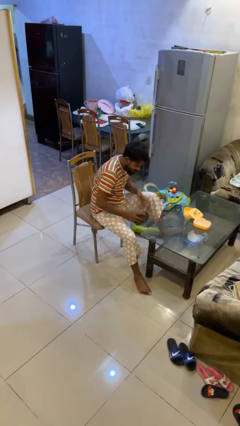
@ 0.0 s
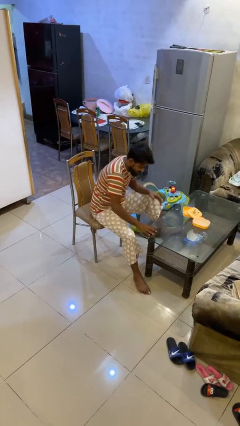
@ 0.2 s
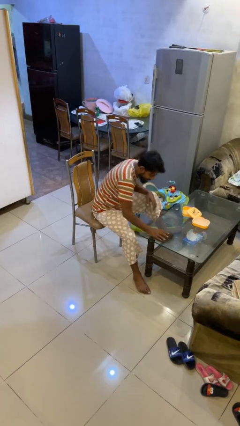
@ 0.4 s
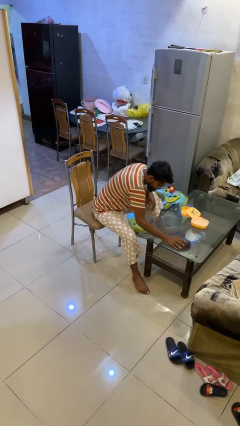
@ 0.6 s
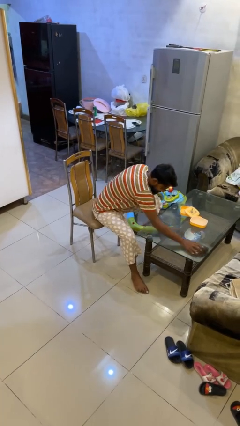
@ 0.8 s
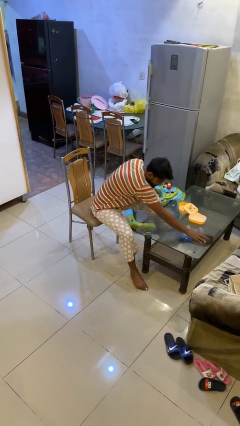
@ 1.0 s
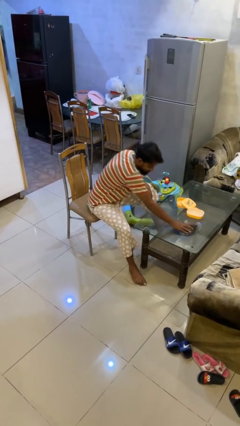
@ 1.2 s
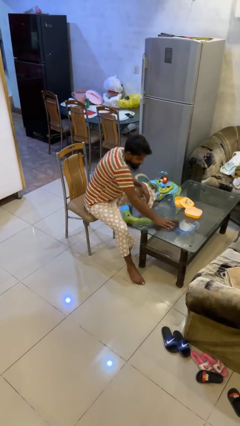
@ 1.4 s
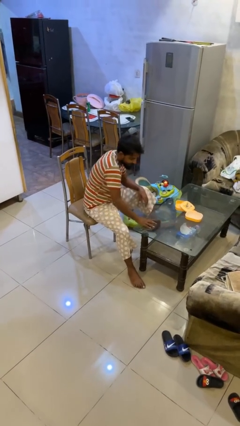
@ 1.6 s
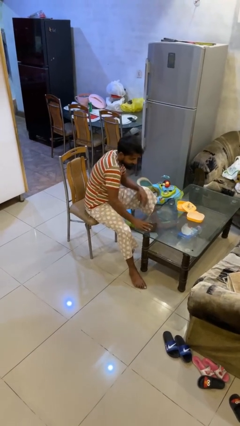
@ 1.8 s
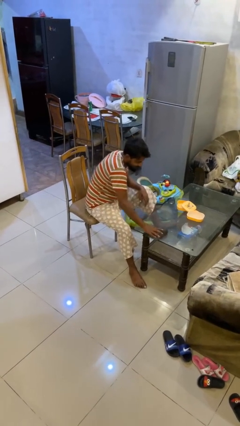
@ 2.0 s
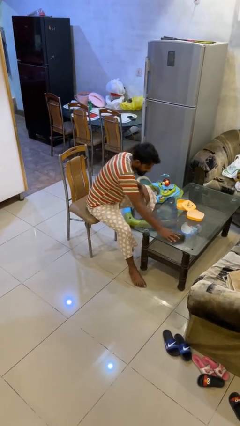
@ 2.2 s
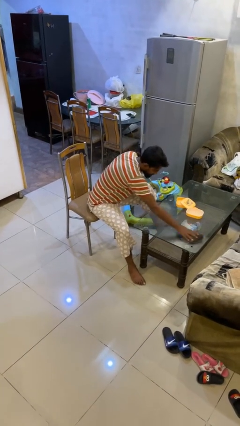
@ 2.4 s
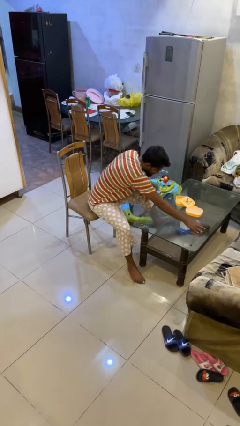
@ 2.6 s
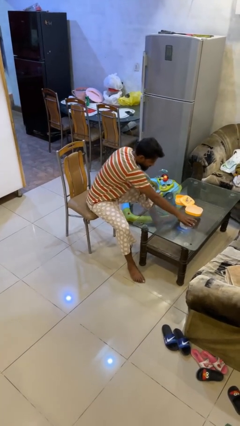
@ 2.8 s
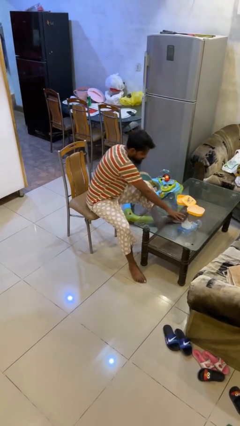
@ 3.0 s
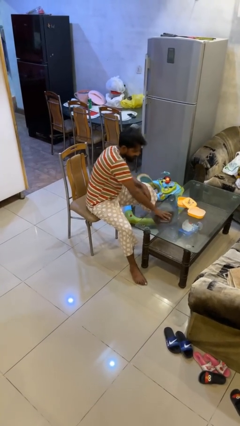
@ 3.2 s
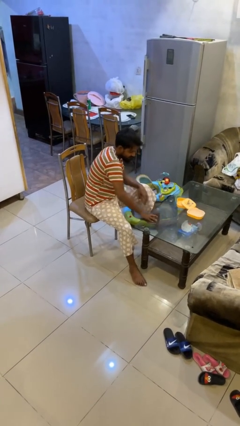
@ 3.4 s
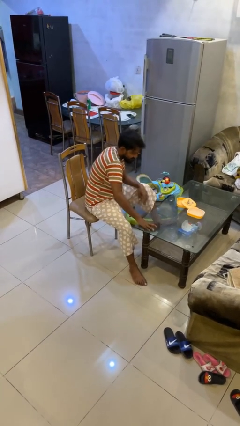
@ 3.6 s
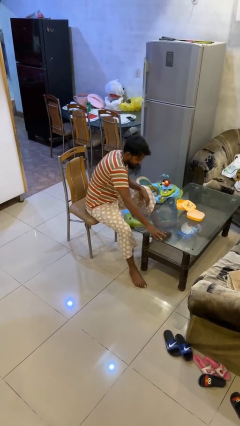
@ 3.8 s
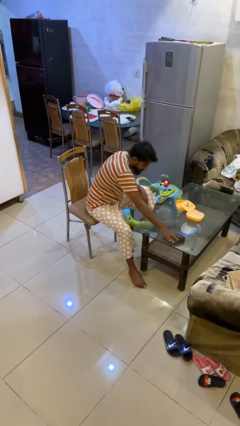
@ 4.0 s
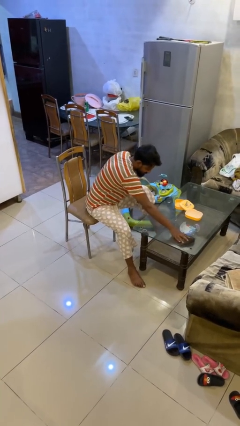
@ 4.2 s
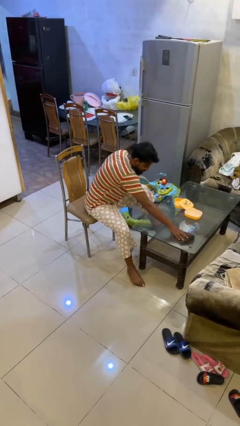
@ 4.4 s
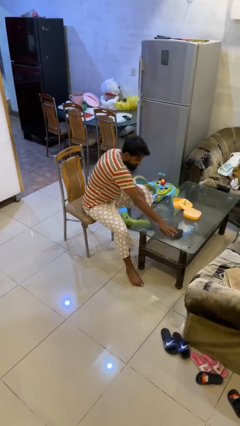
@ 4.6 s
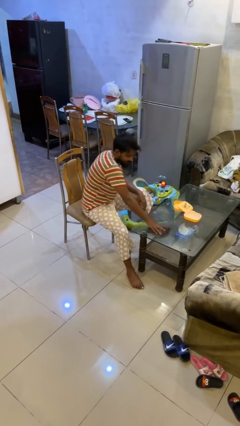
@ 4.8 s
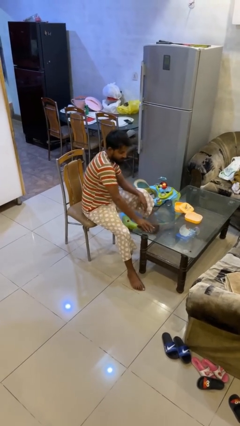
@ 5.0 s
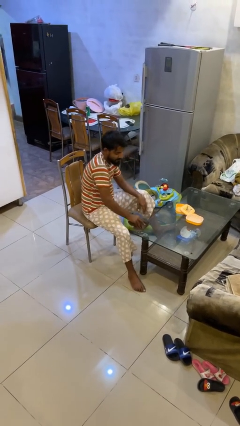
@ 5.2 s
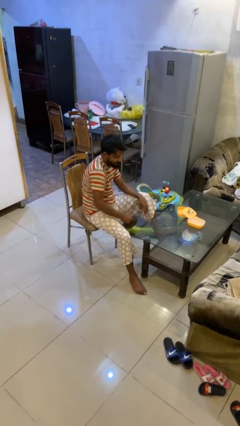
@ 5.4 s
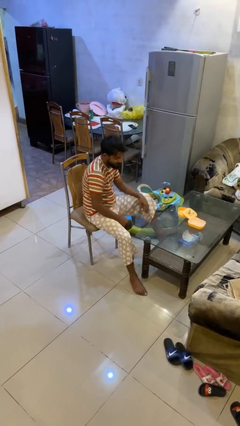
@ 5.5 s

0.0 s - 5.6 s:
person cleans table with rag

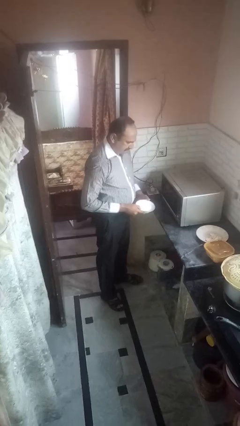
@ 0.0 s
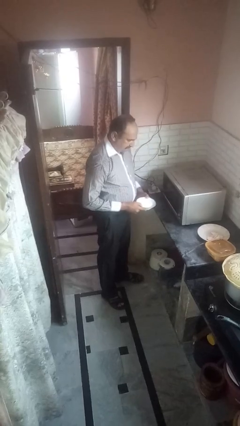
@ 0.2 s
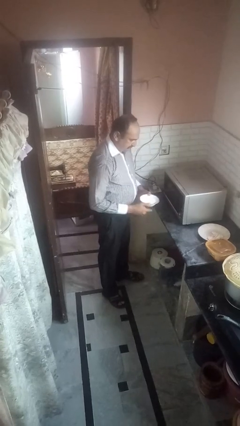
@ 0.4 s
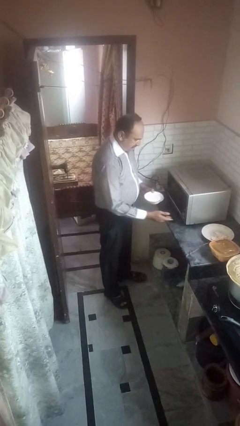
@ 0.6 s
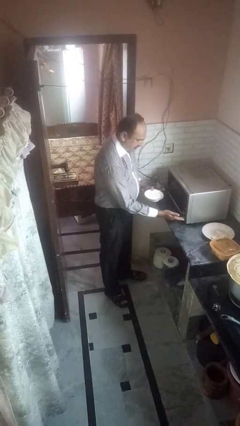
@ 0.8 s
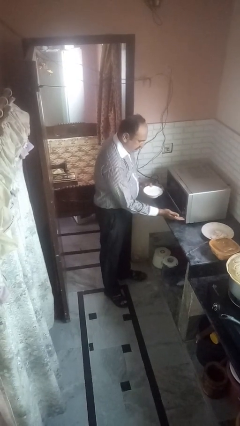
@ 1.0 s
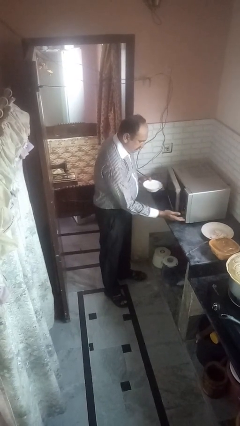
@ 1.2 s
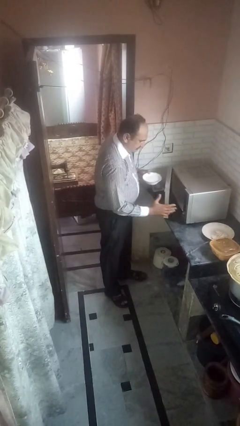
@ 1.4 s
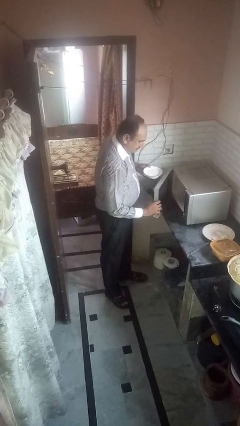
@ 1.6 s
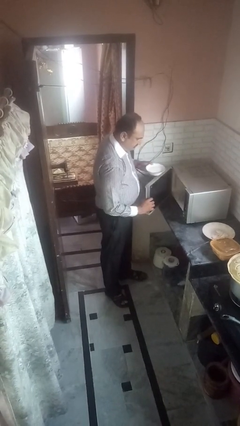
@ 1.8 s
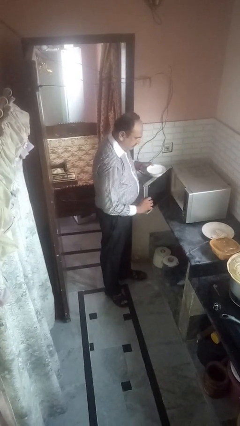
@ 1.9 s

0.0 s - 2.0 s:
person opens microwave

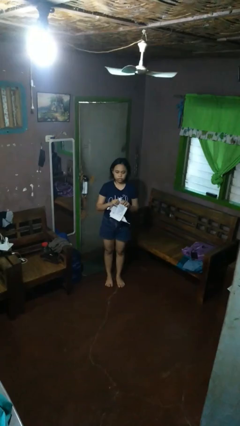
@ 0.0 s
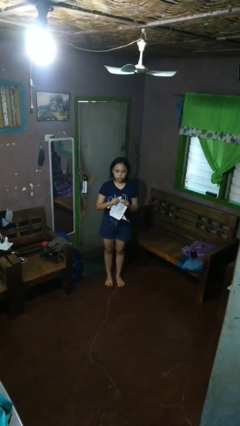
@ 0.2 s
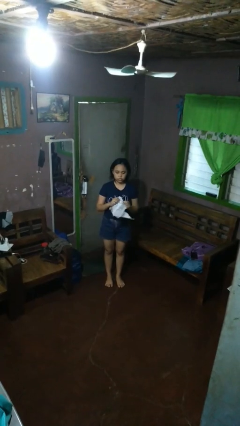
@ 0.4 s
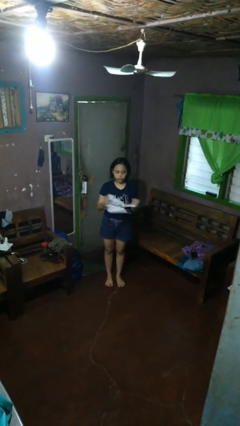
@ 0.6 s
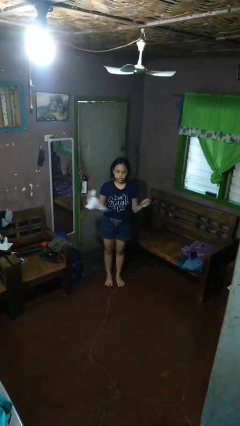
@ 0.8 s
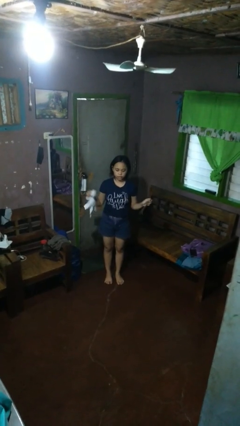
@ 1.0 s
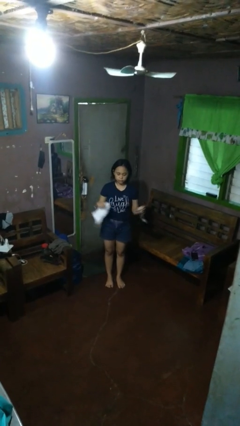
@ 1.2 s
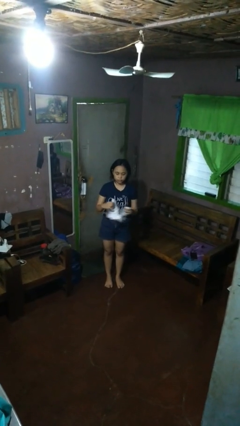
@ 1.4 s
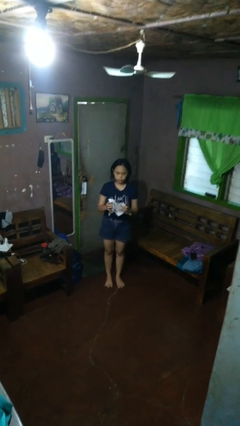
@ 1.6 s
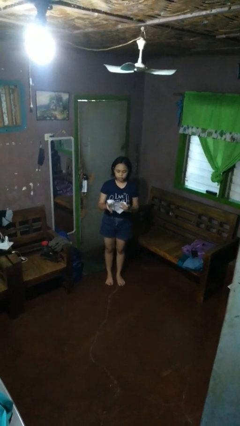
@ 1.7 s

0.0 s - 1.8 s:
person tears paper

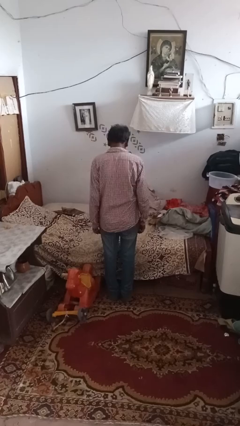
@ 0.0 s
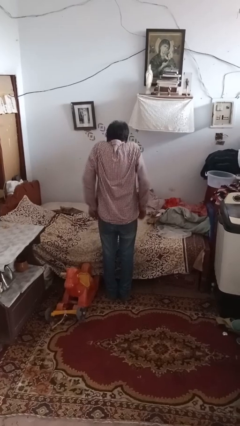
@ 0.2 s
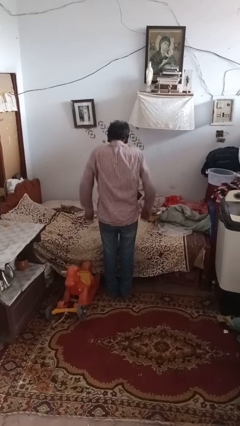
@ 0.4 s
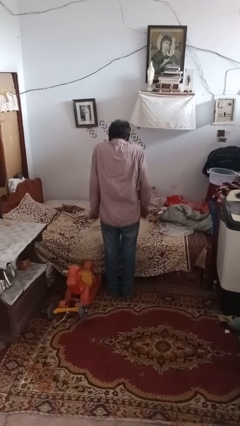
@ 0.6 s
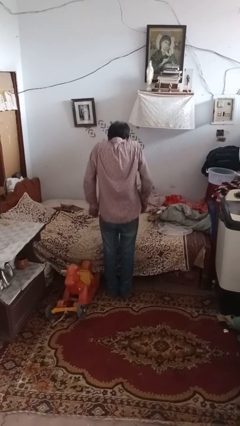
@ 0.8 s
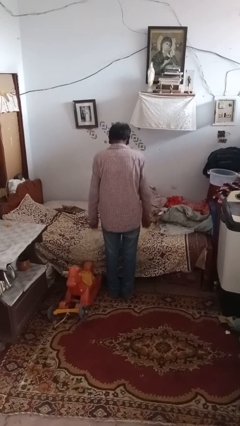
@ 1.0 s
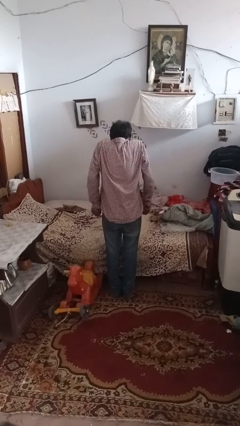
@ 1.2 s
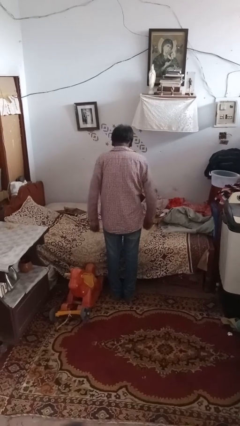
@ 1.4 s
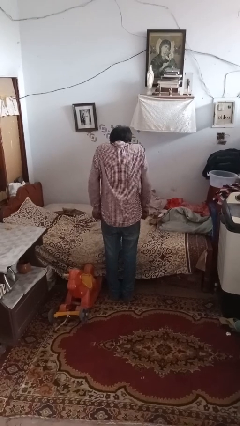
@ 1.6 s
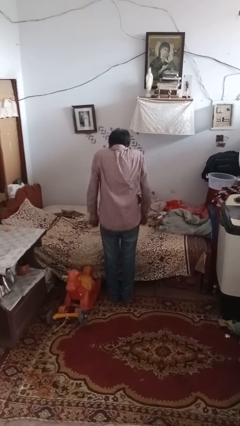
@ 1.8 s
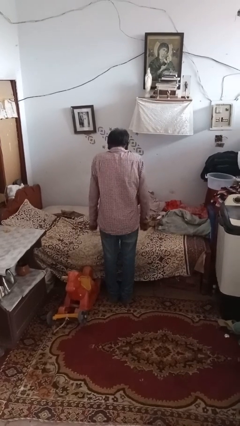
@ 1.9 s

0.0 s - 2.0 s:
person shrugs

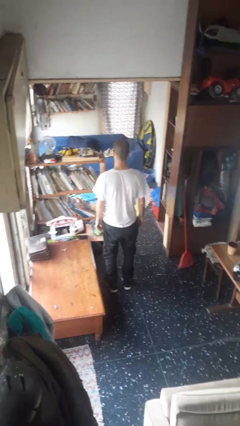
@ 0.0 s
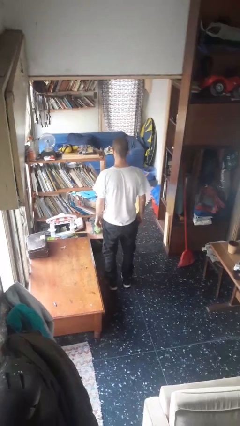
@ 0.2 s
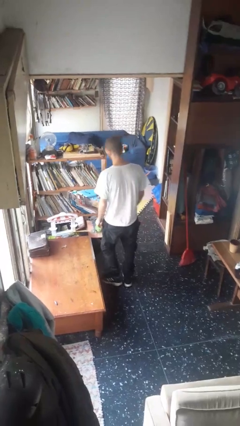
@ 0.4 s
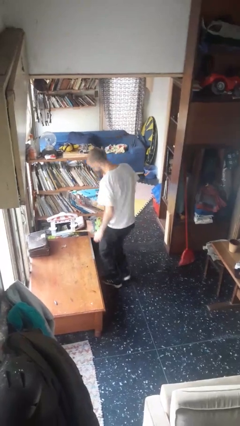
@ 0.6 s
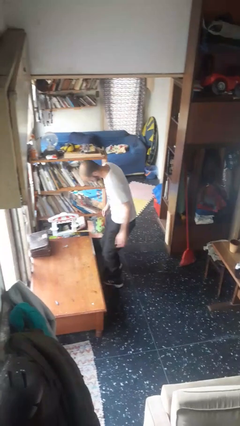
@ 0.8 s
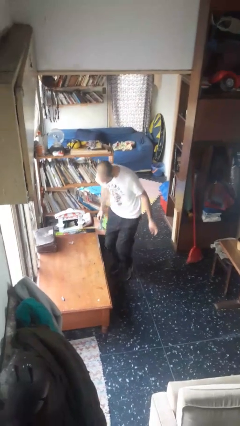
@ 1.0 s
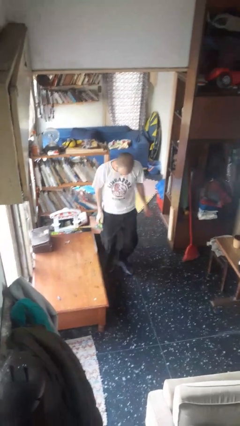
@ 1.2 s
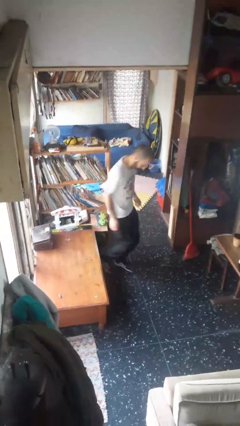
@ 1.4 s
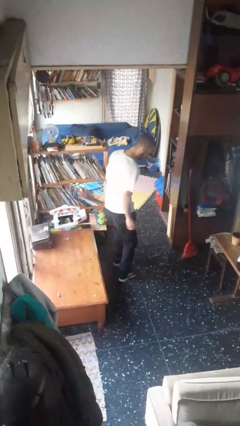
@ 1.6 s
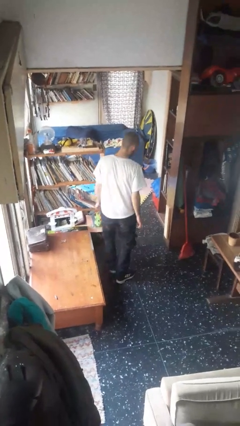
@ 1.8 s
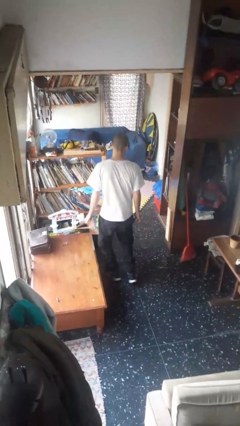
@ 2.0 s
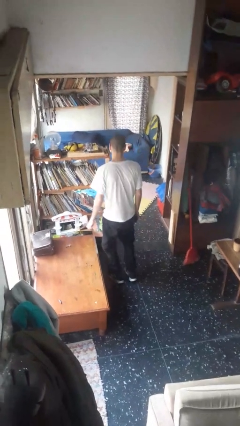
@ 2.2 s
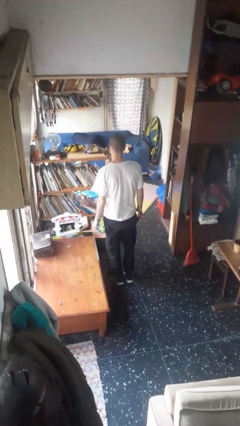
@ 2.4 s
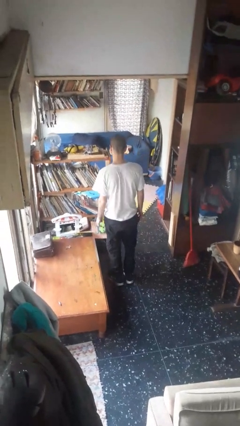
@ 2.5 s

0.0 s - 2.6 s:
person twirls

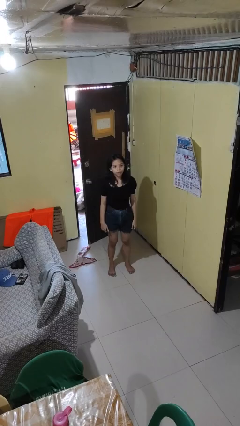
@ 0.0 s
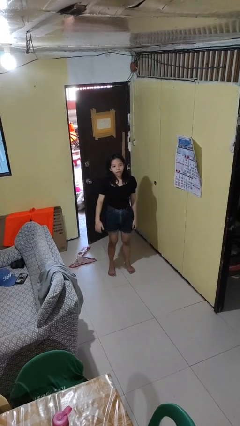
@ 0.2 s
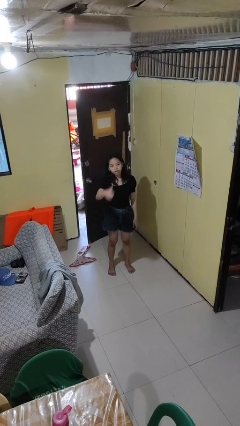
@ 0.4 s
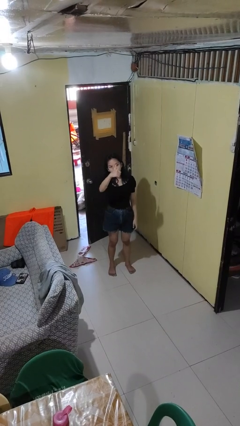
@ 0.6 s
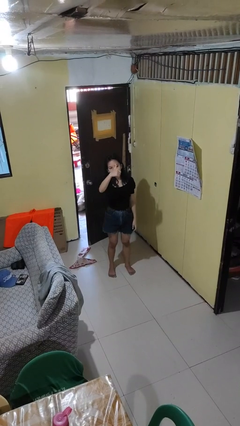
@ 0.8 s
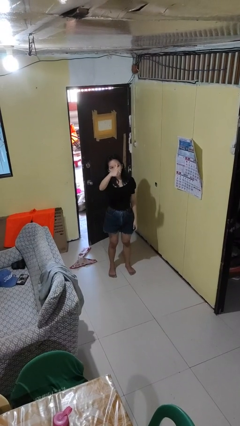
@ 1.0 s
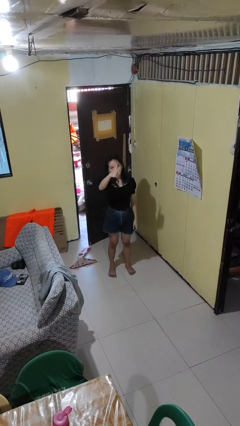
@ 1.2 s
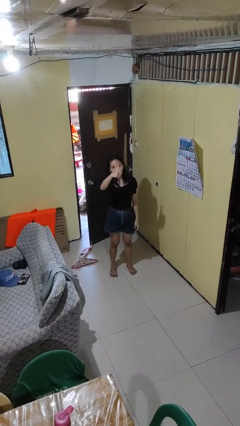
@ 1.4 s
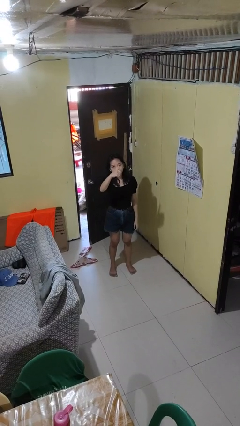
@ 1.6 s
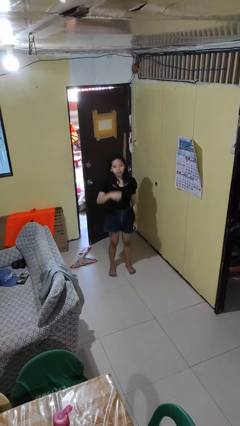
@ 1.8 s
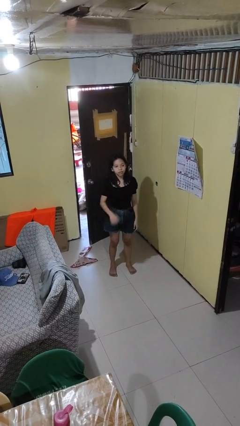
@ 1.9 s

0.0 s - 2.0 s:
person gestures thumbs up

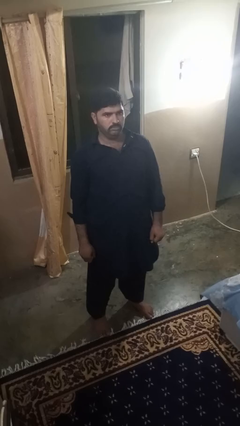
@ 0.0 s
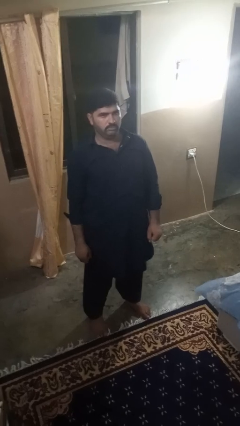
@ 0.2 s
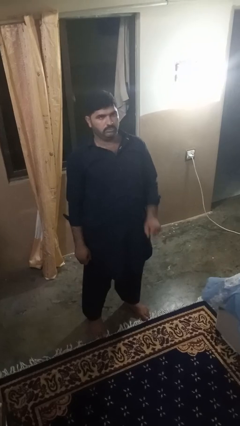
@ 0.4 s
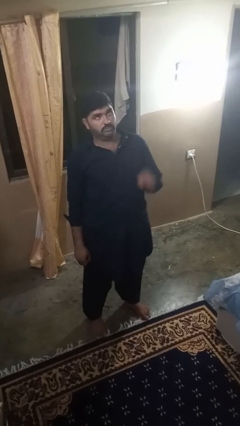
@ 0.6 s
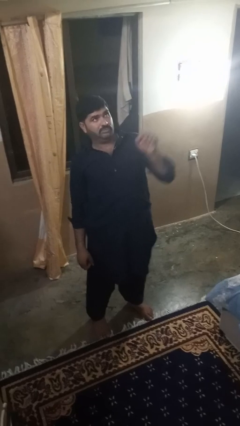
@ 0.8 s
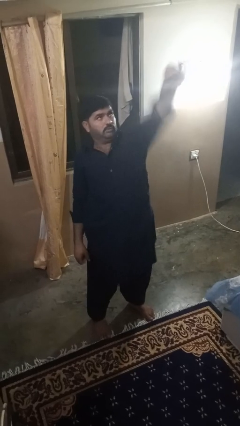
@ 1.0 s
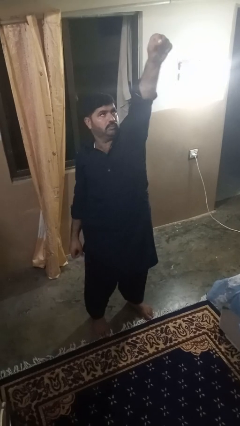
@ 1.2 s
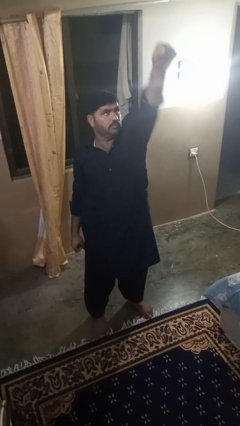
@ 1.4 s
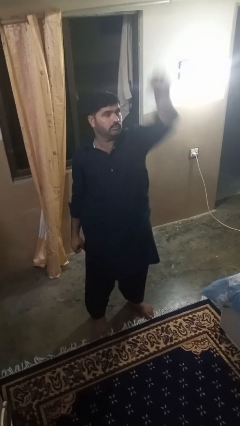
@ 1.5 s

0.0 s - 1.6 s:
person punches
